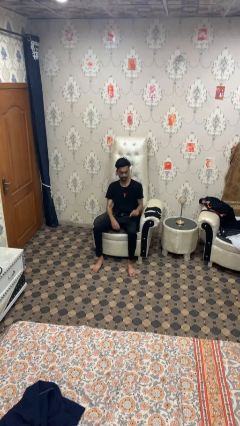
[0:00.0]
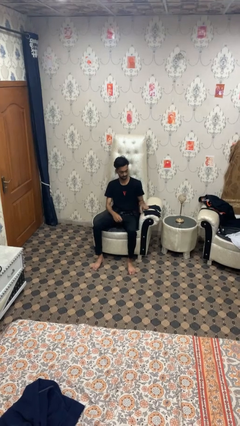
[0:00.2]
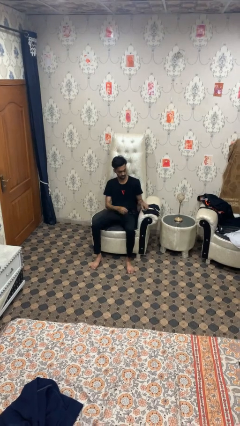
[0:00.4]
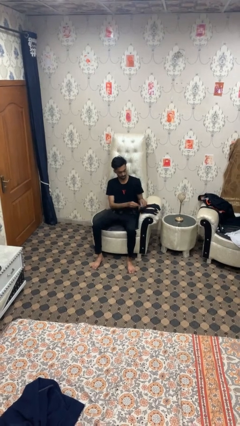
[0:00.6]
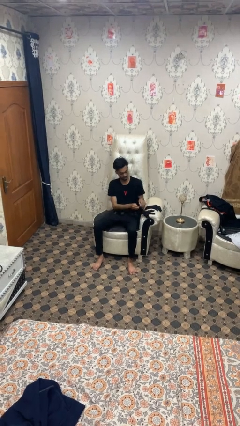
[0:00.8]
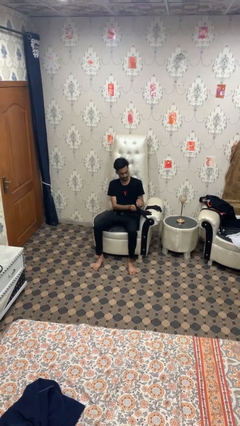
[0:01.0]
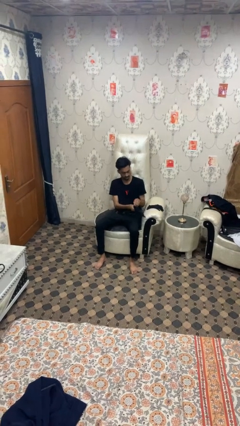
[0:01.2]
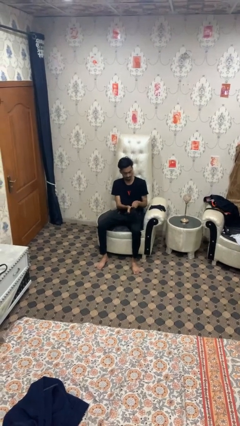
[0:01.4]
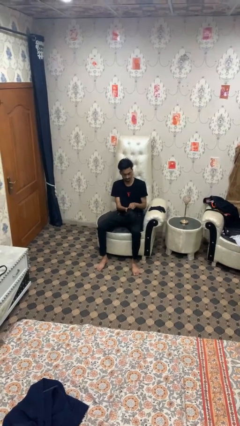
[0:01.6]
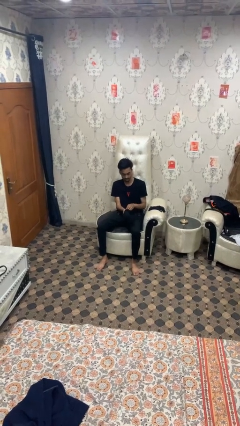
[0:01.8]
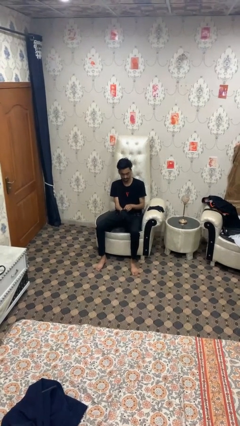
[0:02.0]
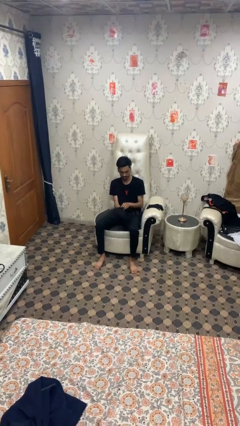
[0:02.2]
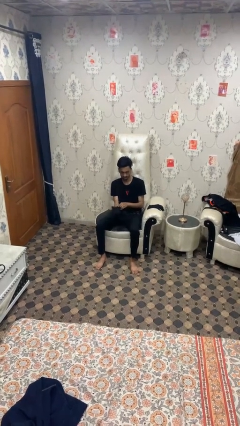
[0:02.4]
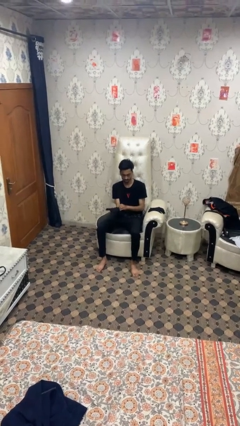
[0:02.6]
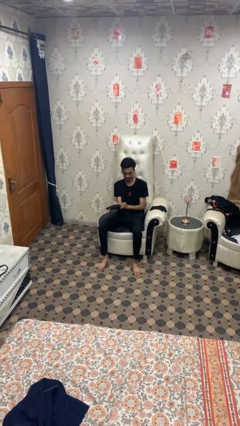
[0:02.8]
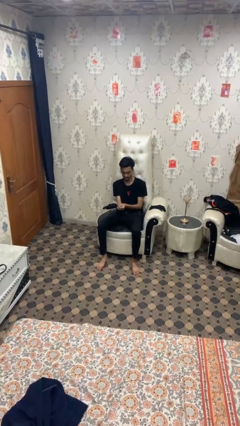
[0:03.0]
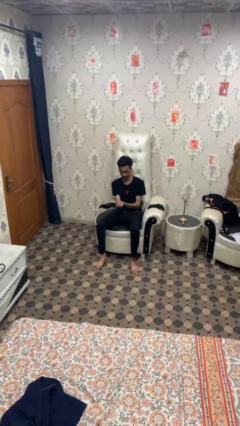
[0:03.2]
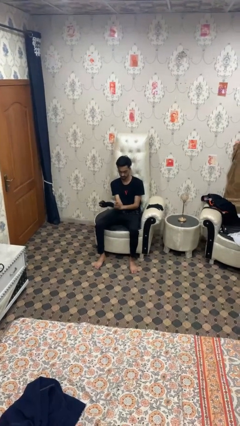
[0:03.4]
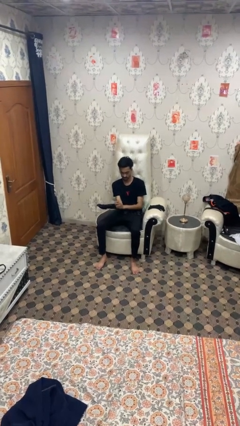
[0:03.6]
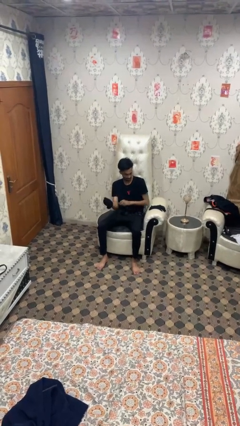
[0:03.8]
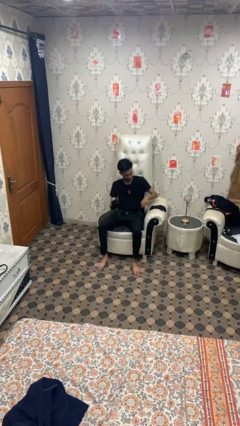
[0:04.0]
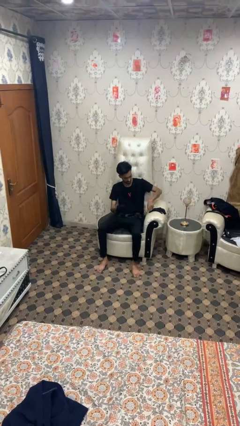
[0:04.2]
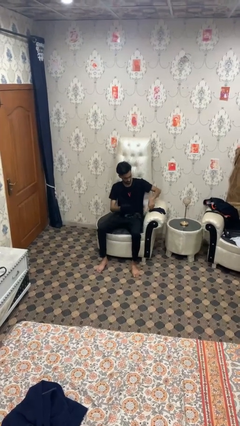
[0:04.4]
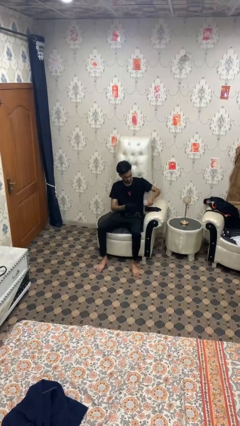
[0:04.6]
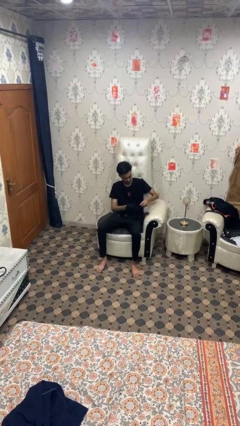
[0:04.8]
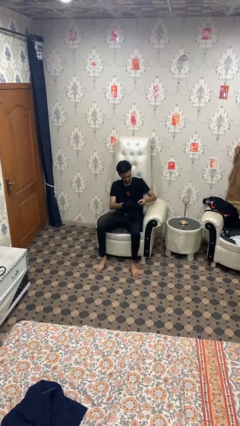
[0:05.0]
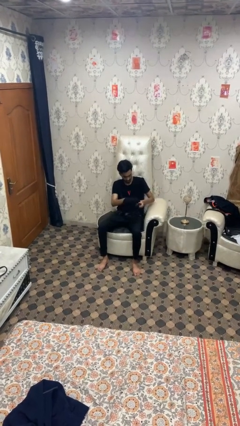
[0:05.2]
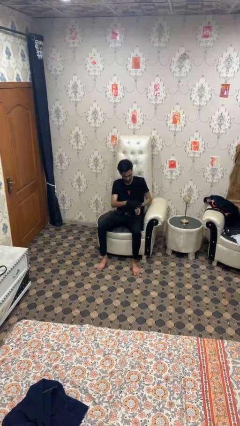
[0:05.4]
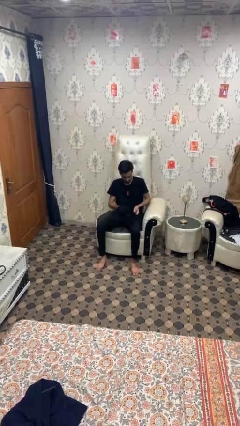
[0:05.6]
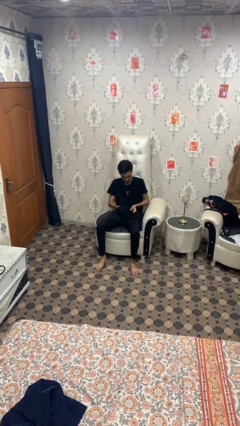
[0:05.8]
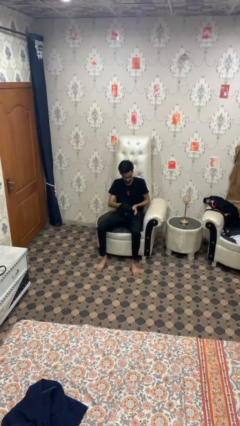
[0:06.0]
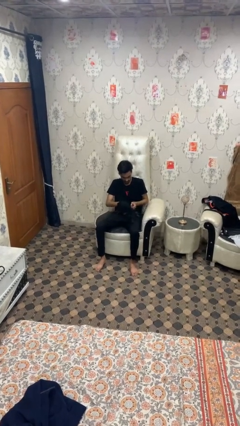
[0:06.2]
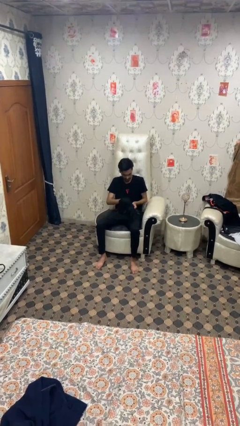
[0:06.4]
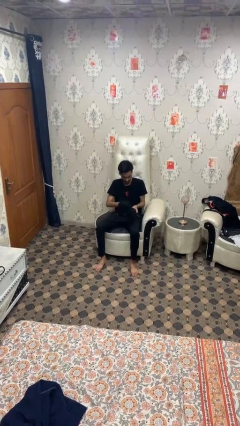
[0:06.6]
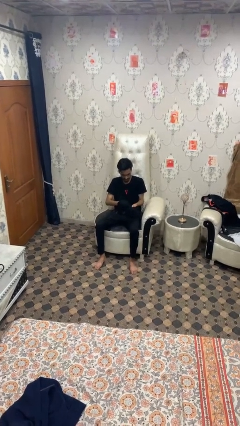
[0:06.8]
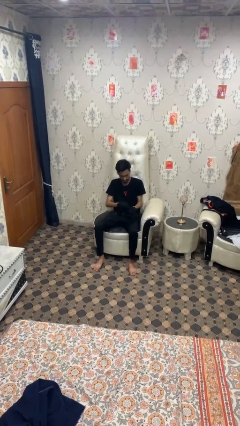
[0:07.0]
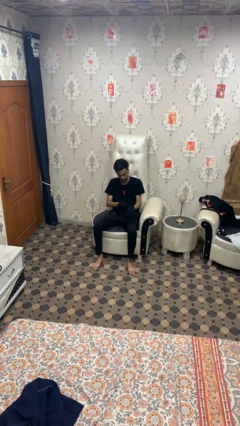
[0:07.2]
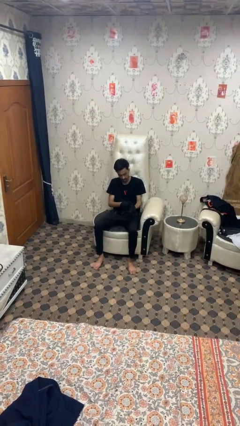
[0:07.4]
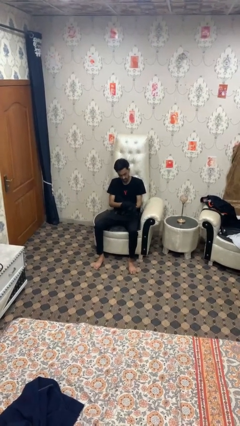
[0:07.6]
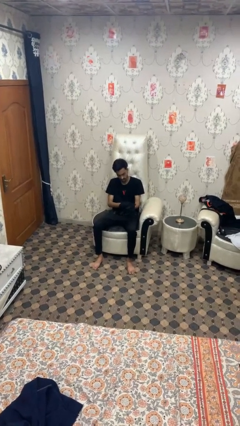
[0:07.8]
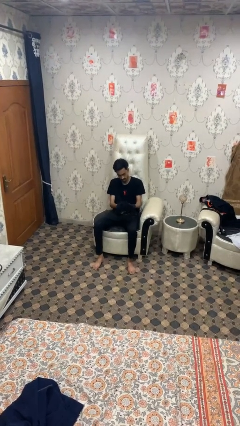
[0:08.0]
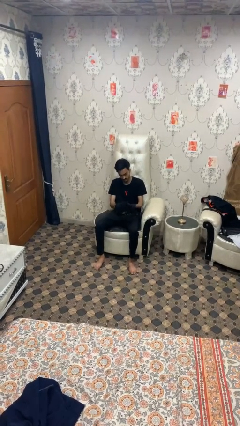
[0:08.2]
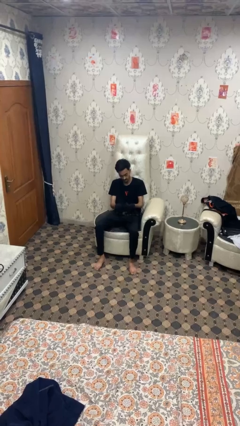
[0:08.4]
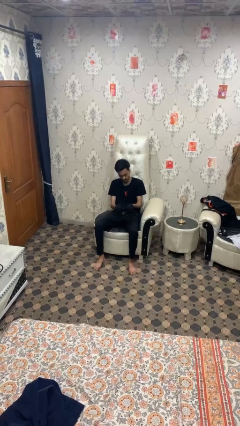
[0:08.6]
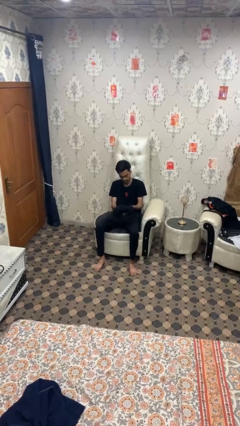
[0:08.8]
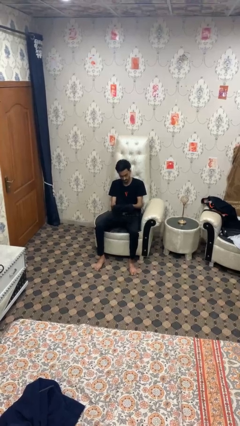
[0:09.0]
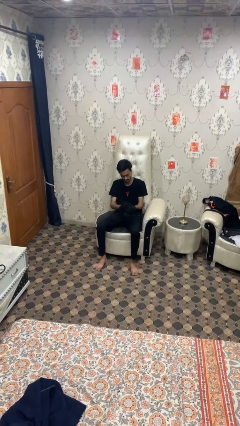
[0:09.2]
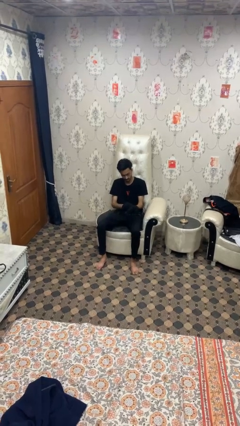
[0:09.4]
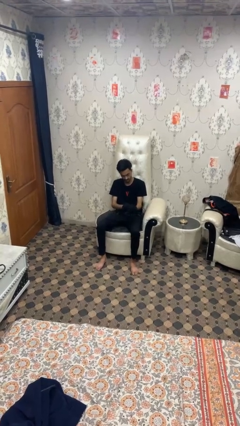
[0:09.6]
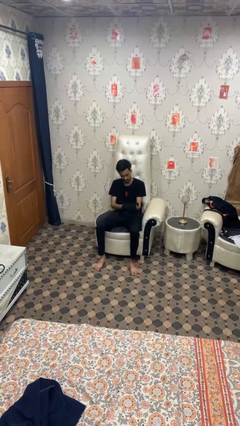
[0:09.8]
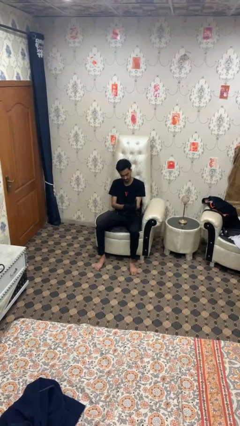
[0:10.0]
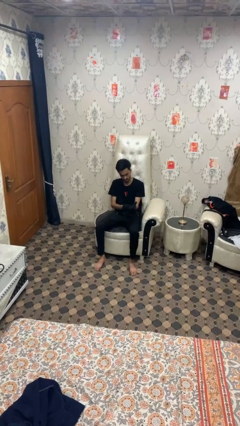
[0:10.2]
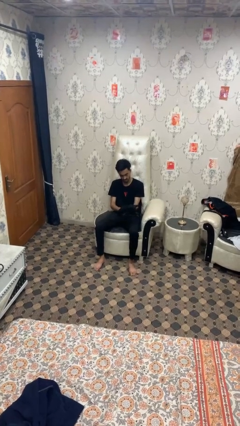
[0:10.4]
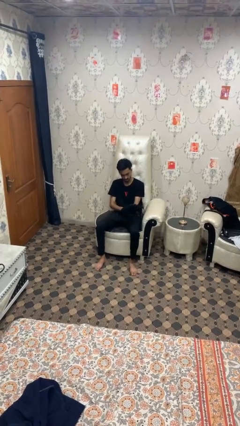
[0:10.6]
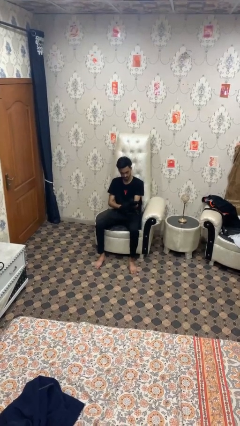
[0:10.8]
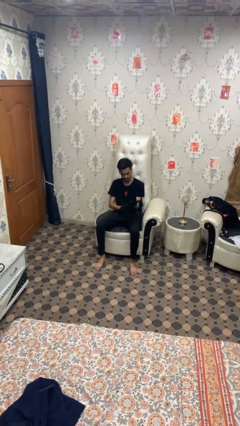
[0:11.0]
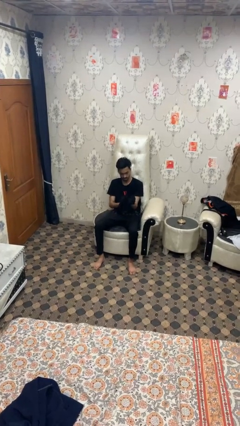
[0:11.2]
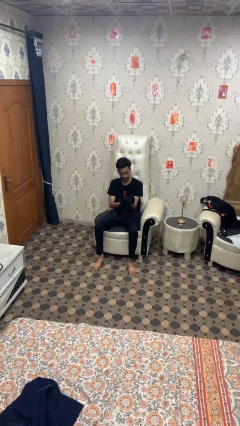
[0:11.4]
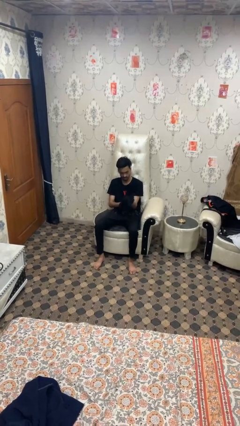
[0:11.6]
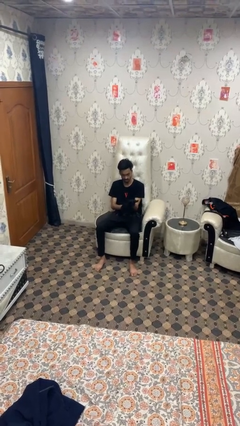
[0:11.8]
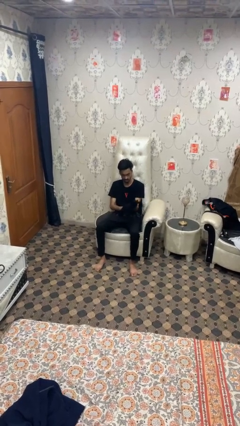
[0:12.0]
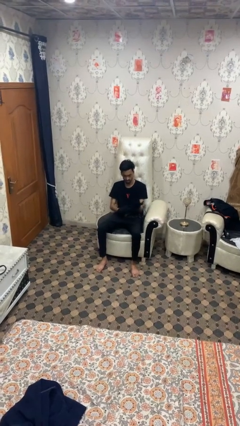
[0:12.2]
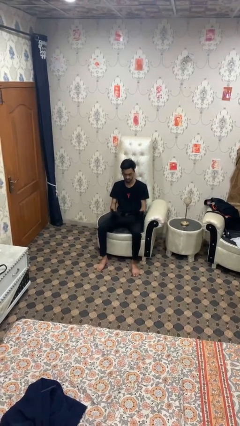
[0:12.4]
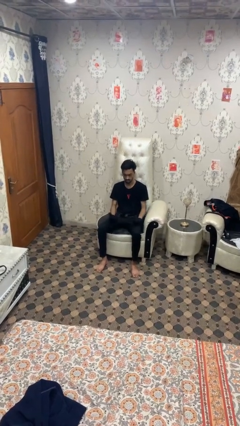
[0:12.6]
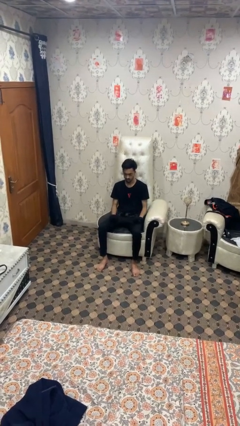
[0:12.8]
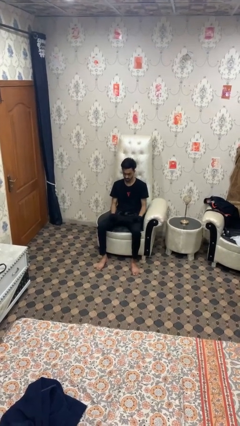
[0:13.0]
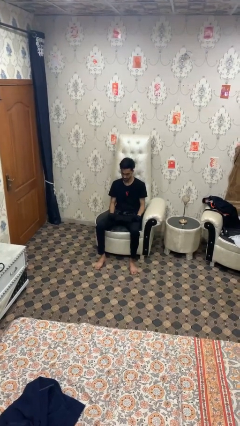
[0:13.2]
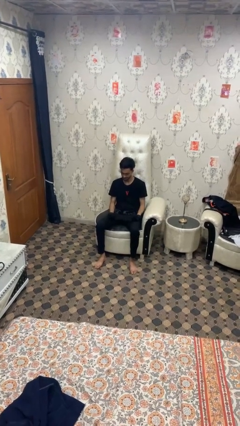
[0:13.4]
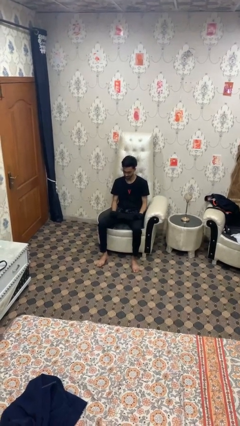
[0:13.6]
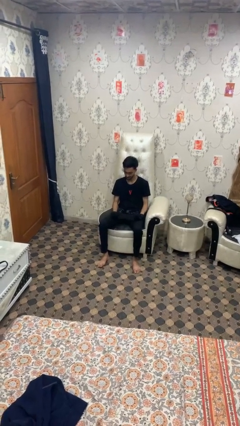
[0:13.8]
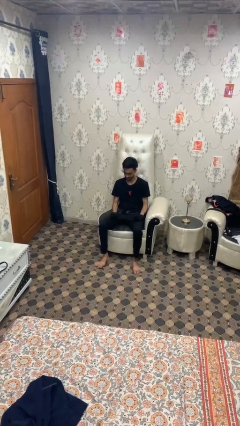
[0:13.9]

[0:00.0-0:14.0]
person puts on gloves

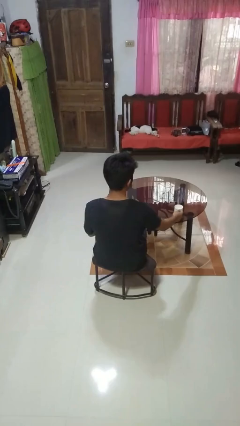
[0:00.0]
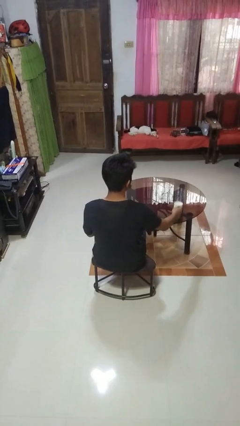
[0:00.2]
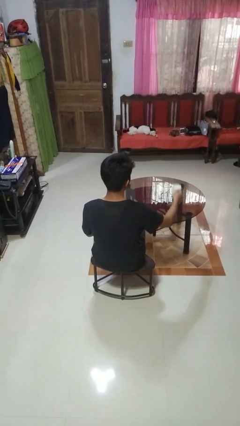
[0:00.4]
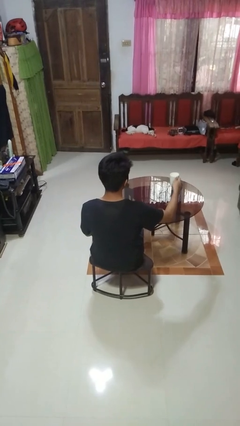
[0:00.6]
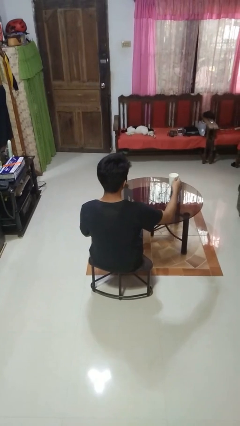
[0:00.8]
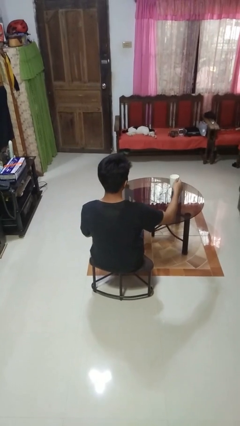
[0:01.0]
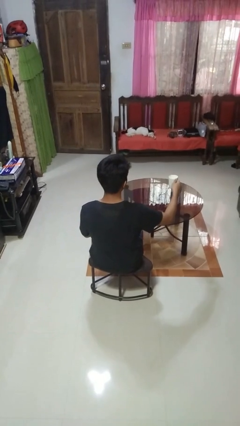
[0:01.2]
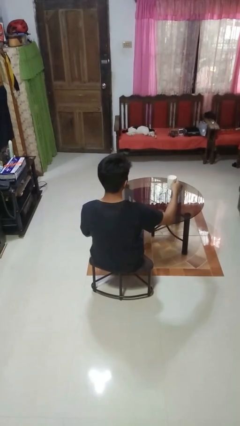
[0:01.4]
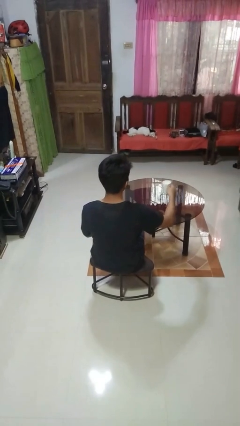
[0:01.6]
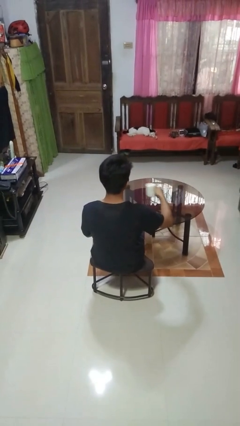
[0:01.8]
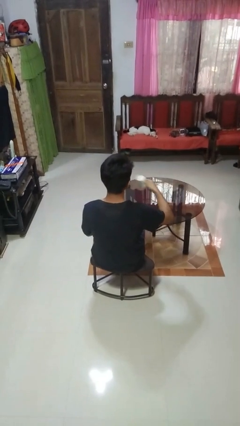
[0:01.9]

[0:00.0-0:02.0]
person picks up object from table

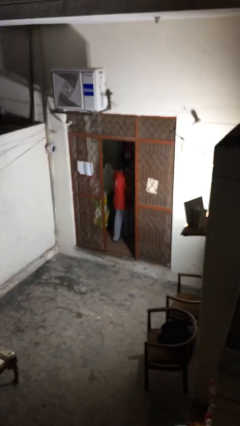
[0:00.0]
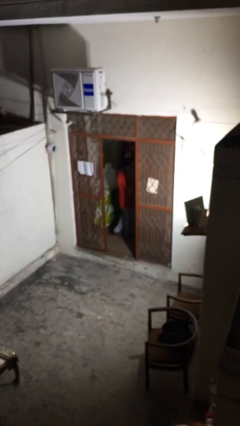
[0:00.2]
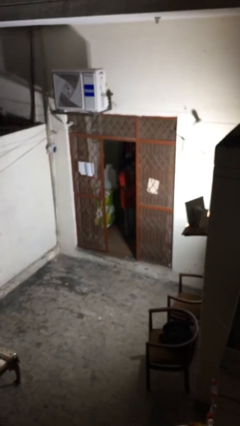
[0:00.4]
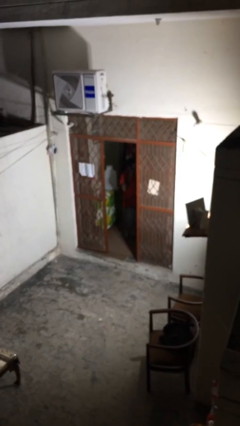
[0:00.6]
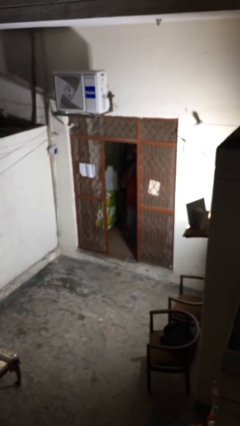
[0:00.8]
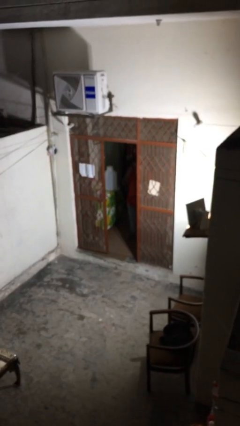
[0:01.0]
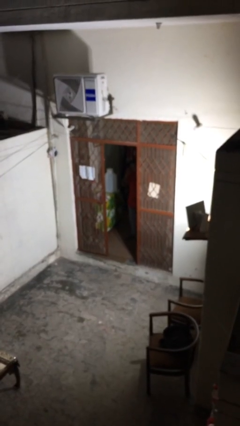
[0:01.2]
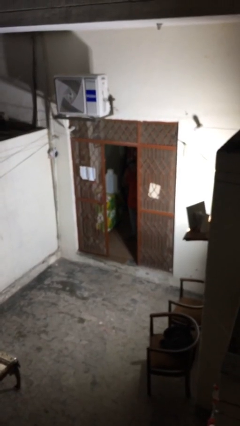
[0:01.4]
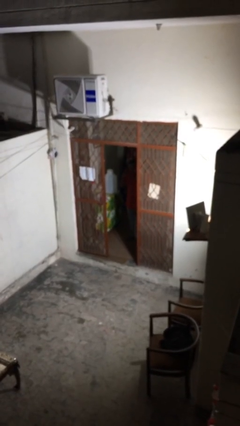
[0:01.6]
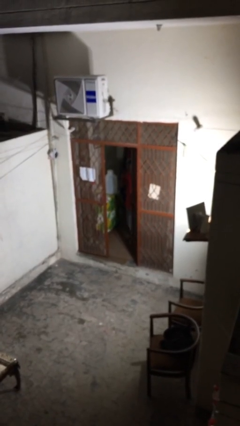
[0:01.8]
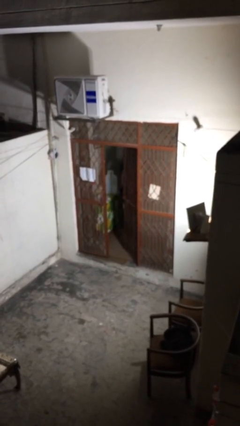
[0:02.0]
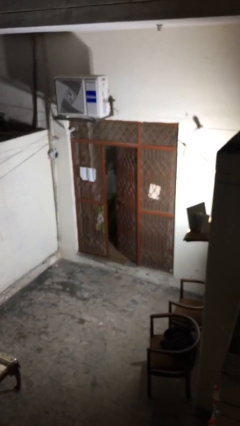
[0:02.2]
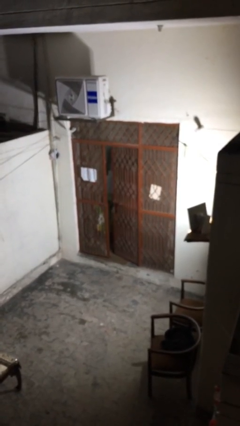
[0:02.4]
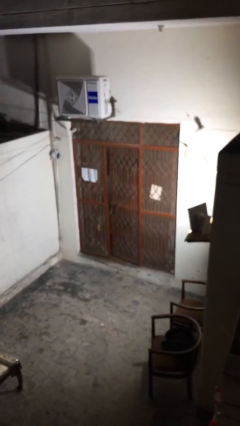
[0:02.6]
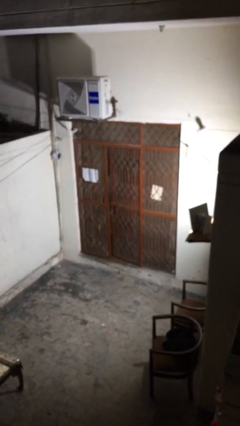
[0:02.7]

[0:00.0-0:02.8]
person closes facility door
